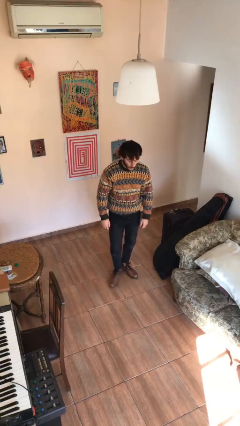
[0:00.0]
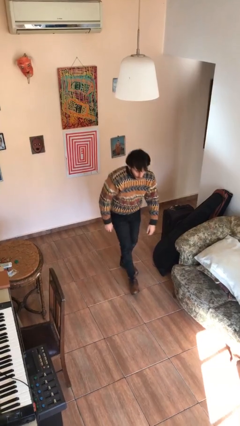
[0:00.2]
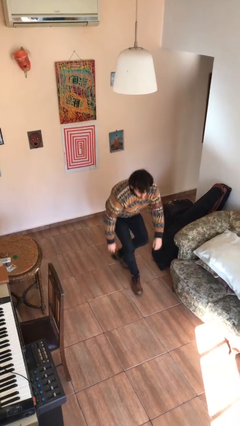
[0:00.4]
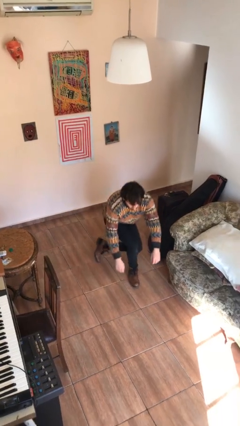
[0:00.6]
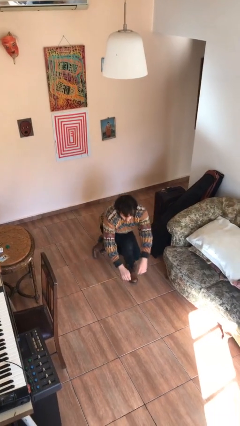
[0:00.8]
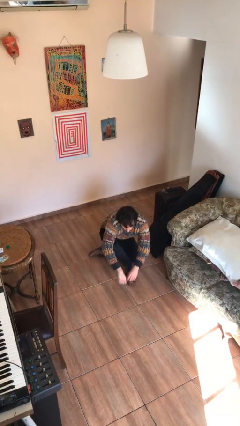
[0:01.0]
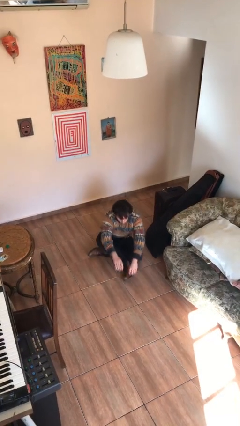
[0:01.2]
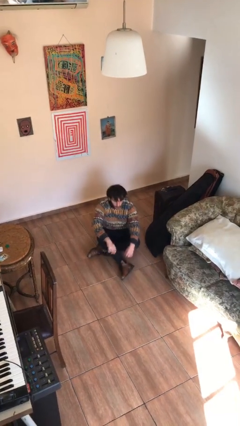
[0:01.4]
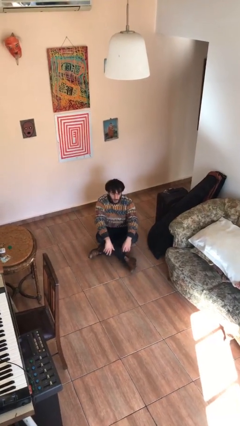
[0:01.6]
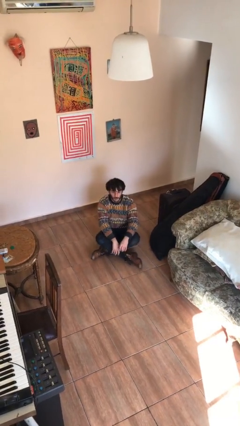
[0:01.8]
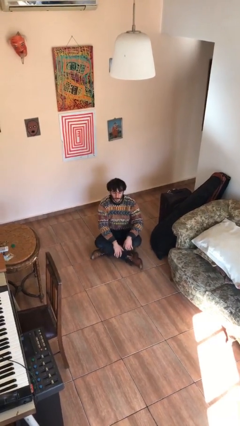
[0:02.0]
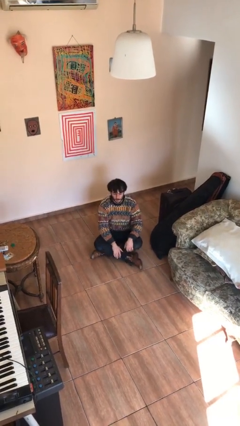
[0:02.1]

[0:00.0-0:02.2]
person sits crisscross

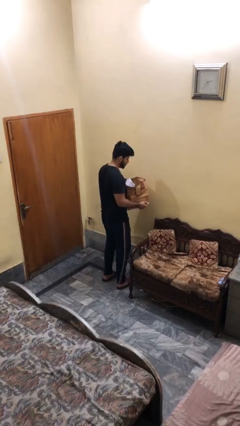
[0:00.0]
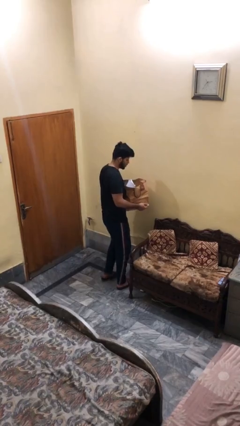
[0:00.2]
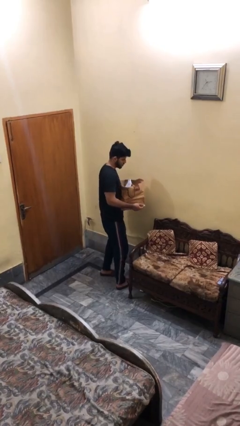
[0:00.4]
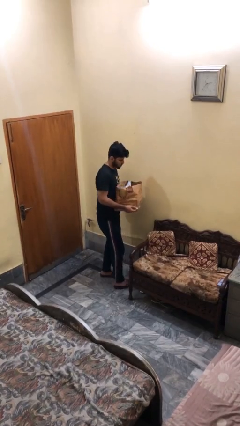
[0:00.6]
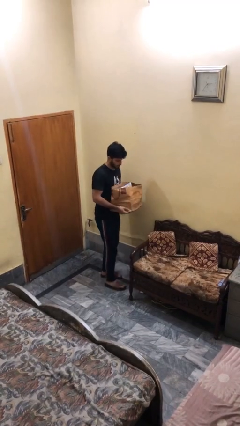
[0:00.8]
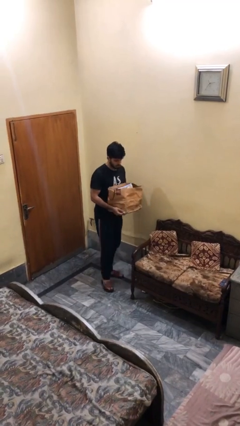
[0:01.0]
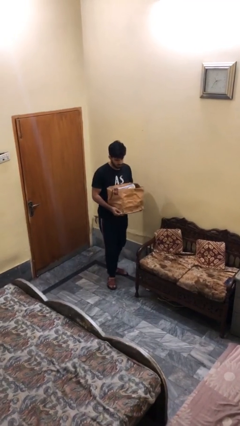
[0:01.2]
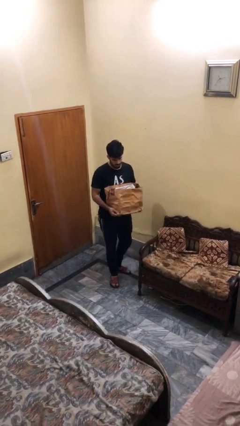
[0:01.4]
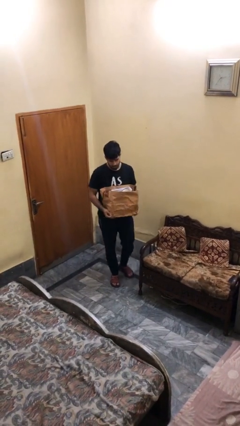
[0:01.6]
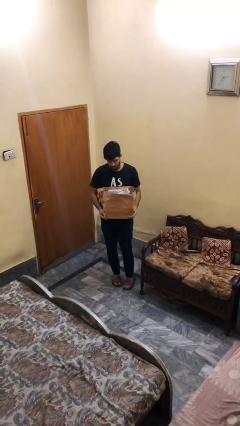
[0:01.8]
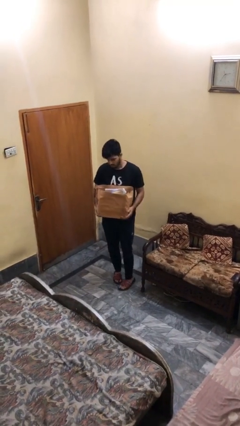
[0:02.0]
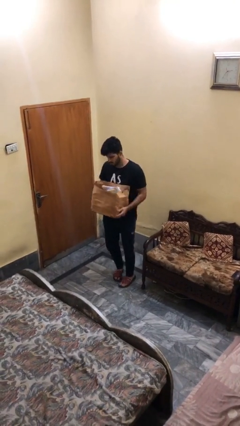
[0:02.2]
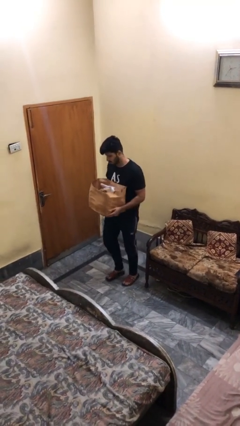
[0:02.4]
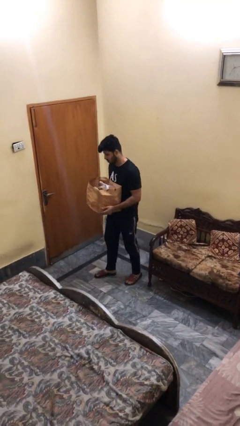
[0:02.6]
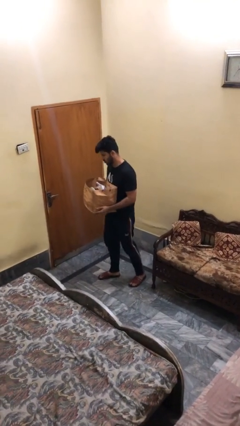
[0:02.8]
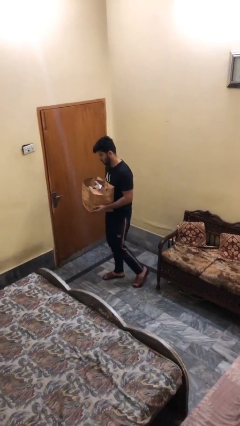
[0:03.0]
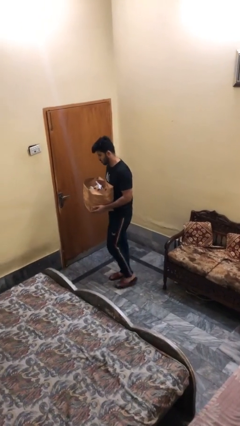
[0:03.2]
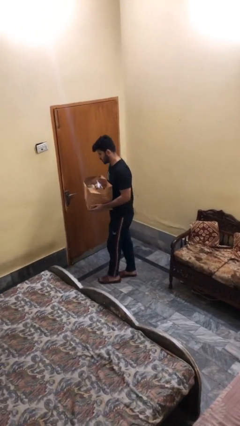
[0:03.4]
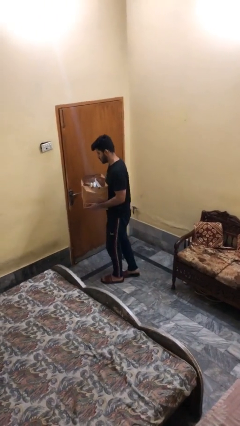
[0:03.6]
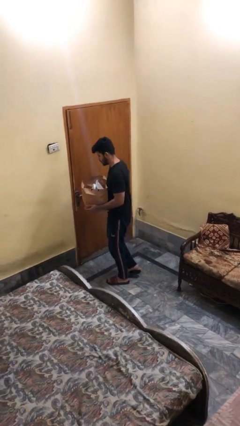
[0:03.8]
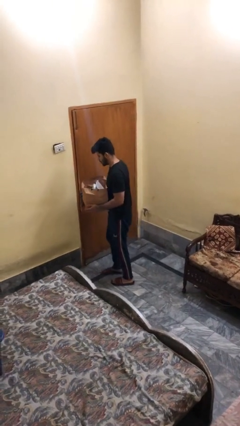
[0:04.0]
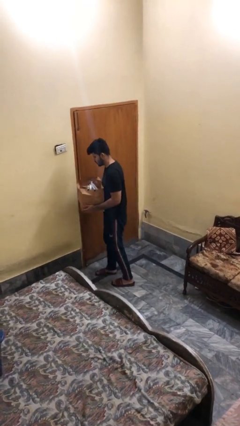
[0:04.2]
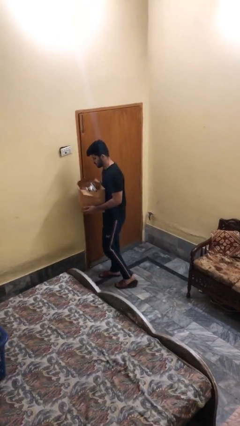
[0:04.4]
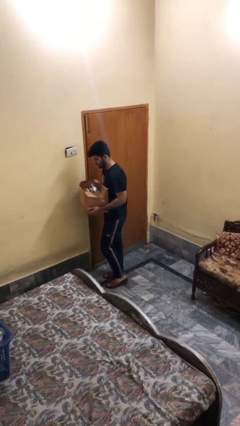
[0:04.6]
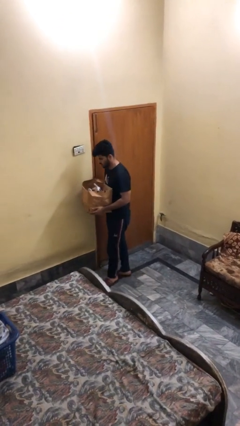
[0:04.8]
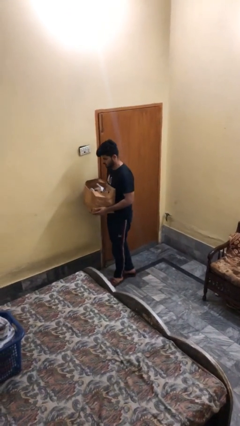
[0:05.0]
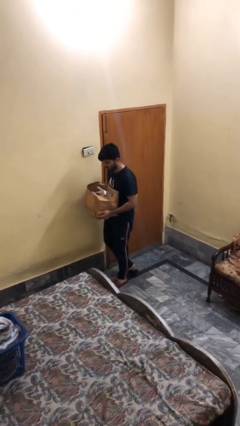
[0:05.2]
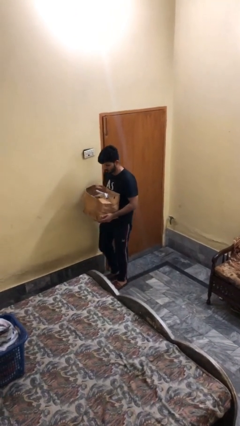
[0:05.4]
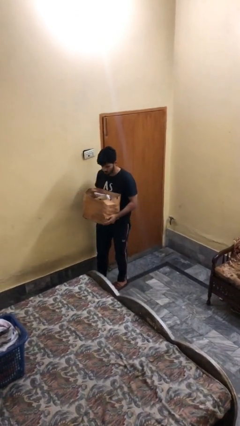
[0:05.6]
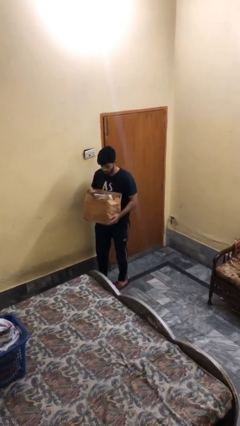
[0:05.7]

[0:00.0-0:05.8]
person carries groceries

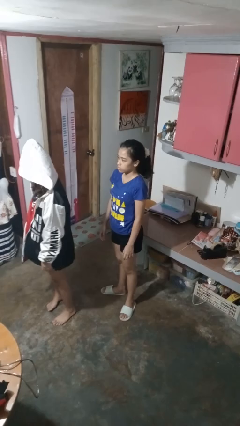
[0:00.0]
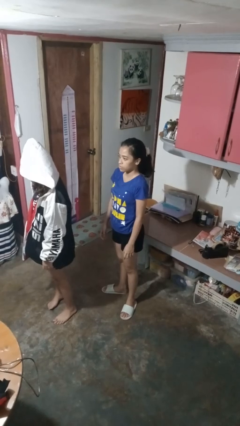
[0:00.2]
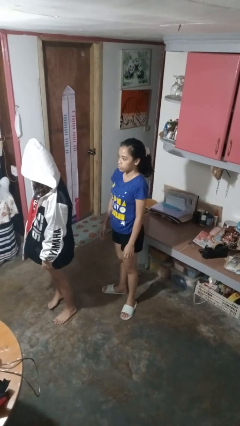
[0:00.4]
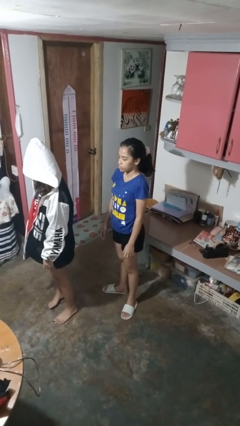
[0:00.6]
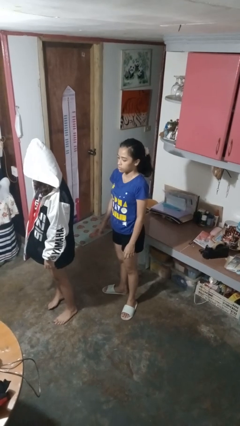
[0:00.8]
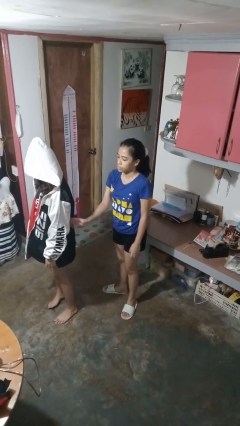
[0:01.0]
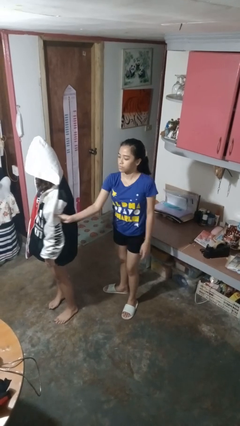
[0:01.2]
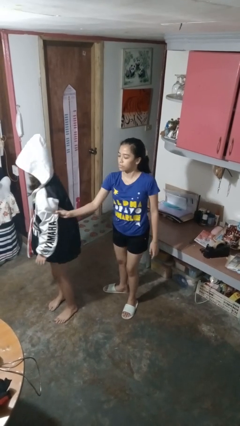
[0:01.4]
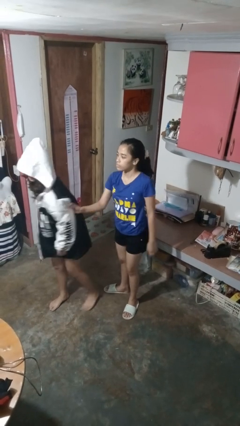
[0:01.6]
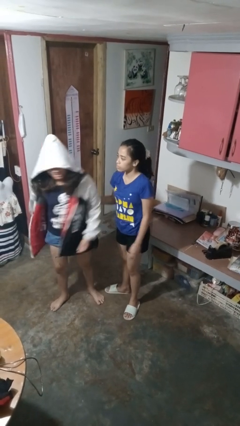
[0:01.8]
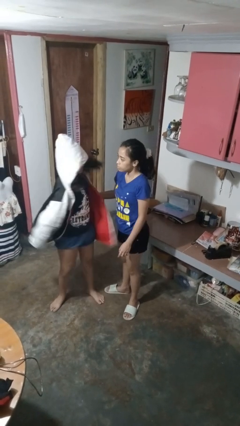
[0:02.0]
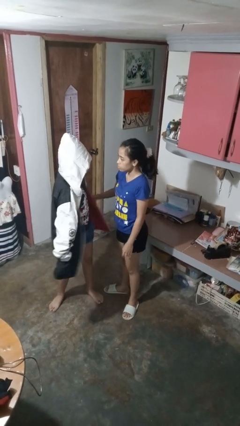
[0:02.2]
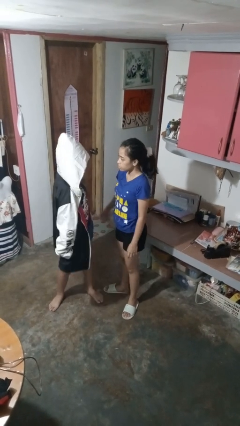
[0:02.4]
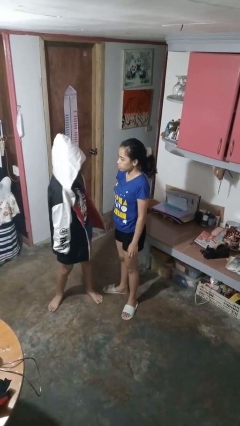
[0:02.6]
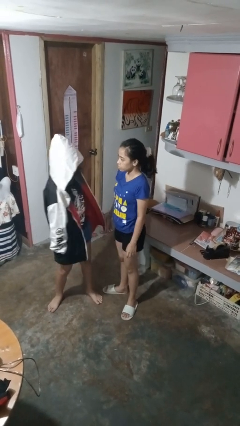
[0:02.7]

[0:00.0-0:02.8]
person grabs person by bicep

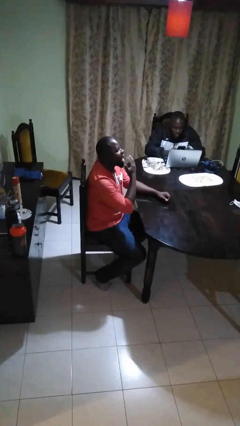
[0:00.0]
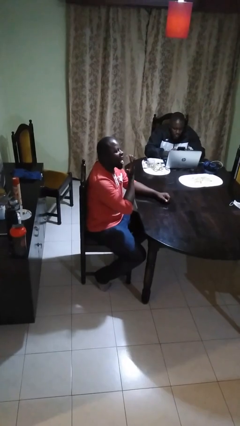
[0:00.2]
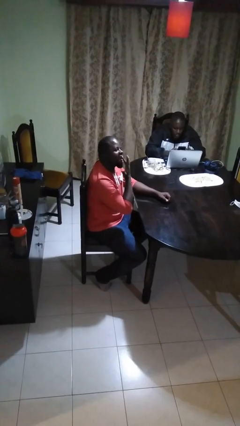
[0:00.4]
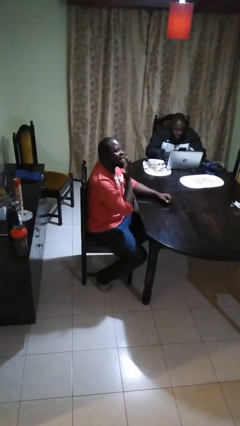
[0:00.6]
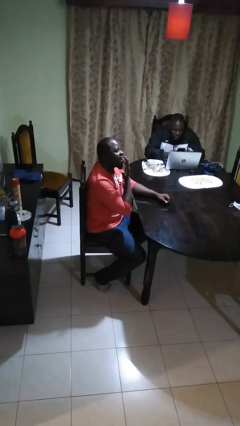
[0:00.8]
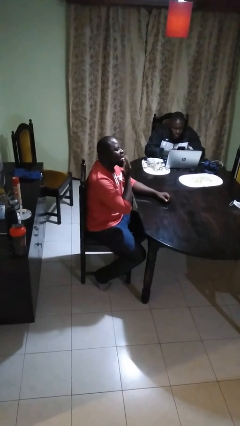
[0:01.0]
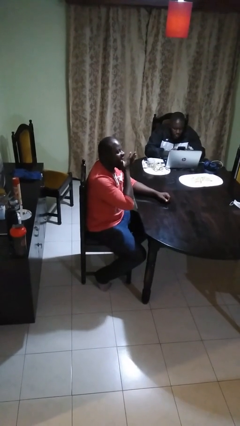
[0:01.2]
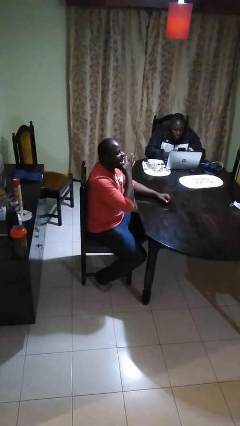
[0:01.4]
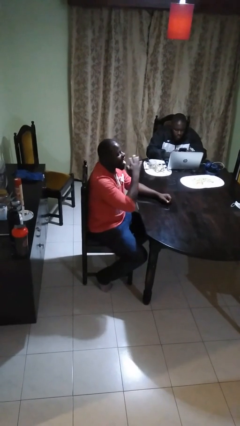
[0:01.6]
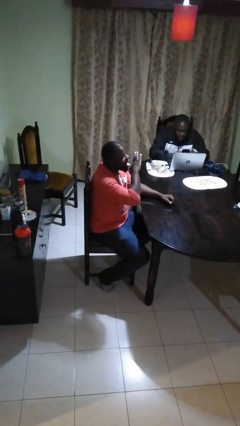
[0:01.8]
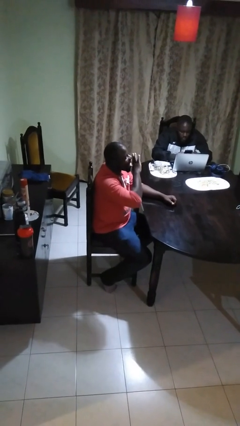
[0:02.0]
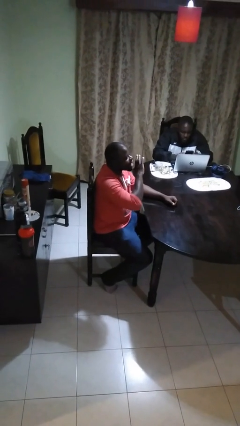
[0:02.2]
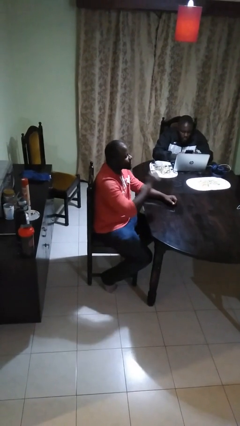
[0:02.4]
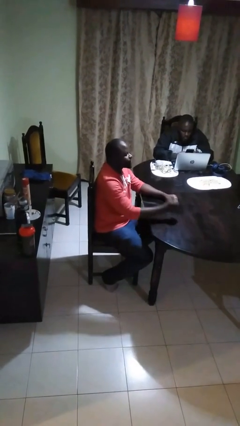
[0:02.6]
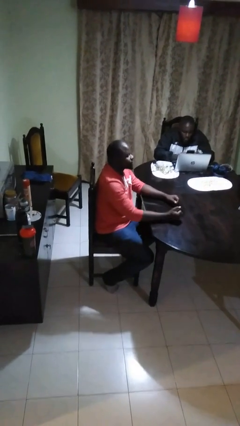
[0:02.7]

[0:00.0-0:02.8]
person licks fingers

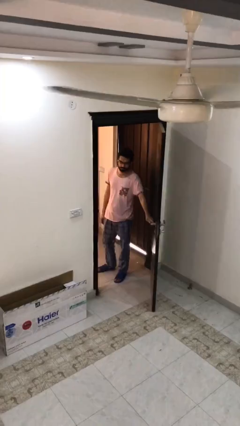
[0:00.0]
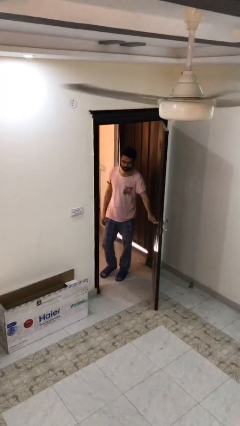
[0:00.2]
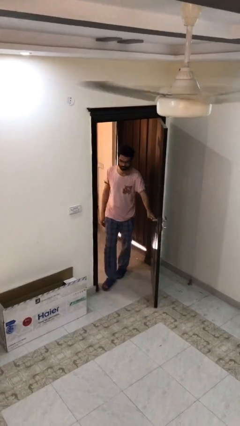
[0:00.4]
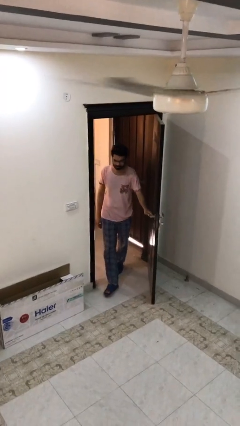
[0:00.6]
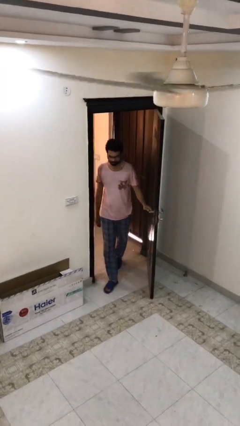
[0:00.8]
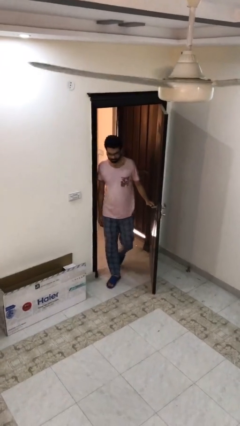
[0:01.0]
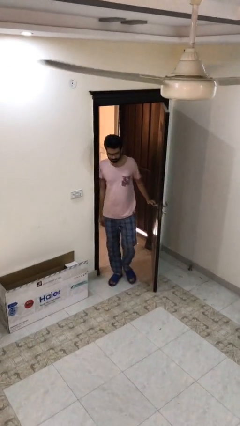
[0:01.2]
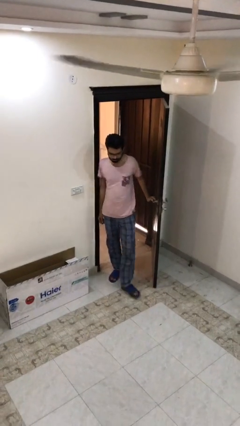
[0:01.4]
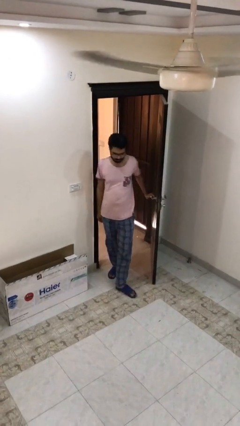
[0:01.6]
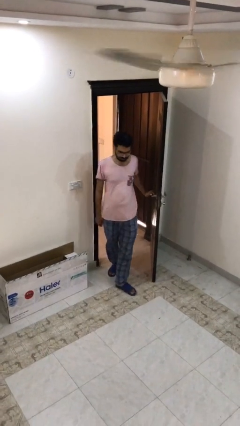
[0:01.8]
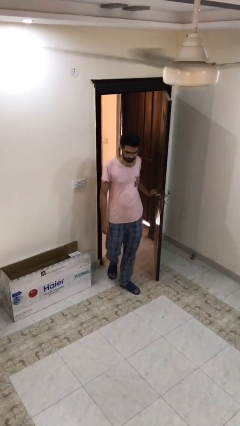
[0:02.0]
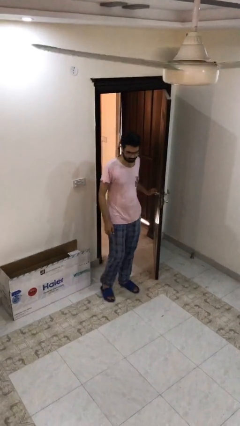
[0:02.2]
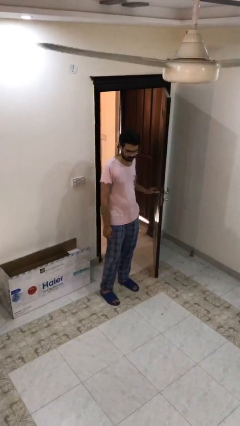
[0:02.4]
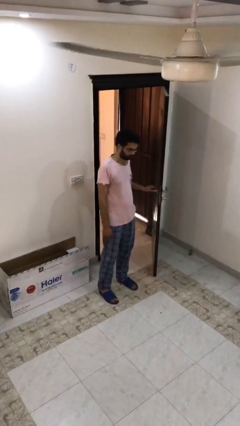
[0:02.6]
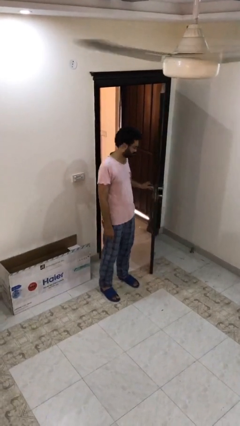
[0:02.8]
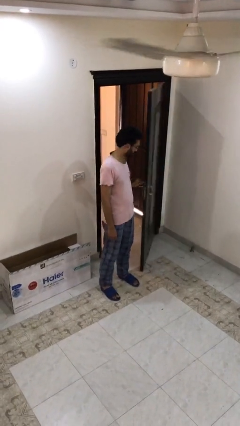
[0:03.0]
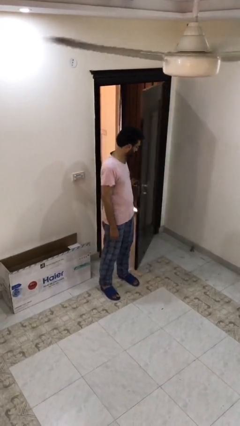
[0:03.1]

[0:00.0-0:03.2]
person enters scene through structure

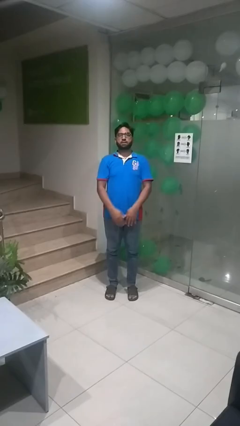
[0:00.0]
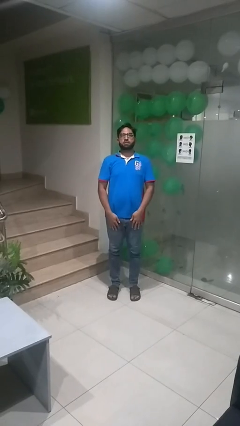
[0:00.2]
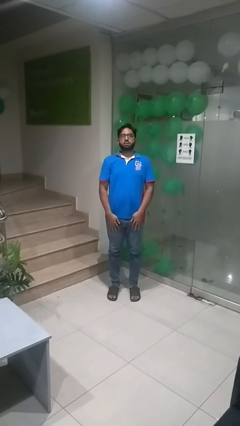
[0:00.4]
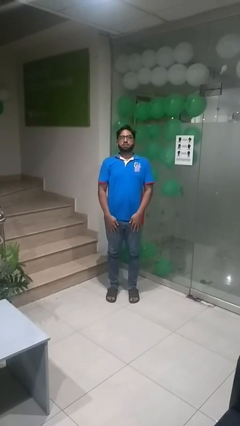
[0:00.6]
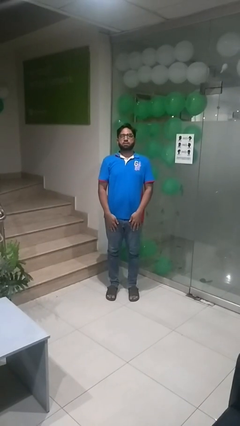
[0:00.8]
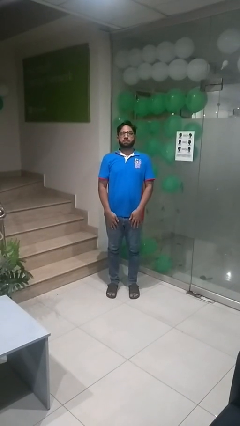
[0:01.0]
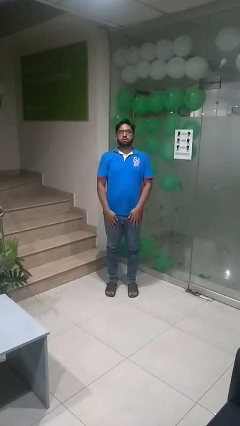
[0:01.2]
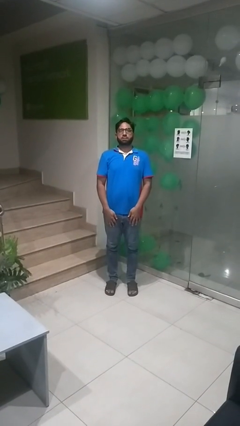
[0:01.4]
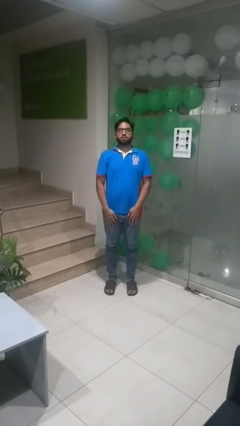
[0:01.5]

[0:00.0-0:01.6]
person stands up
